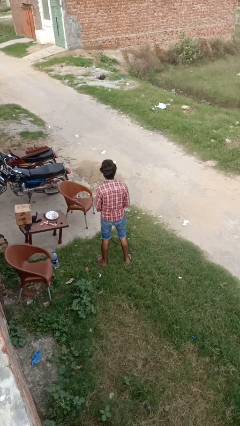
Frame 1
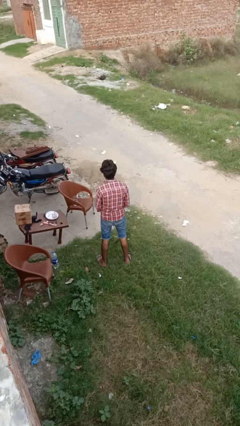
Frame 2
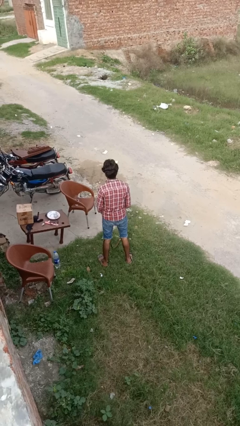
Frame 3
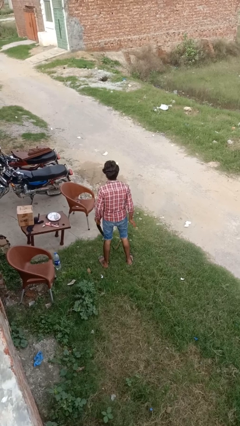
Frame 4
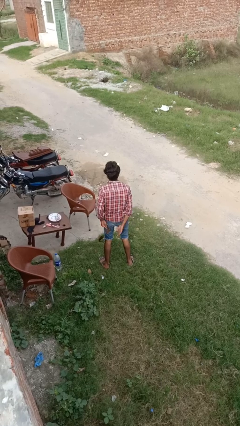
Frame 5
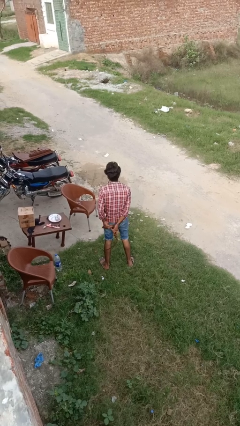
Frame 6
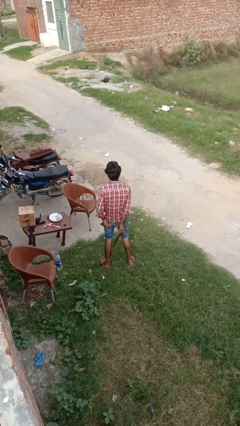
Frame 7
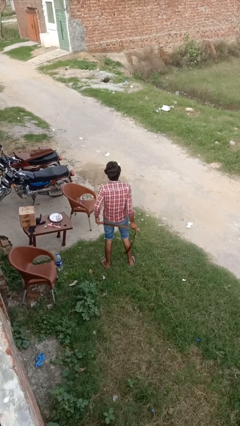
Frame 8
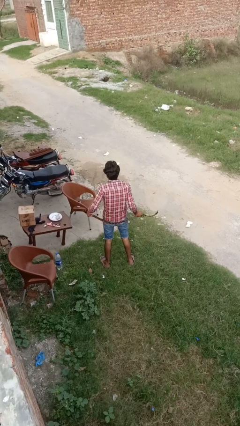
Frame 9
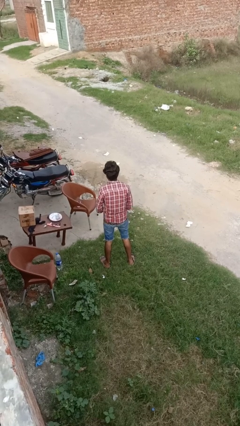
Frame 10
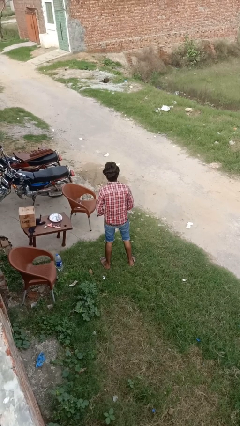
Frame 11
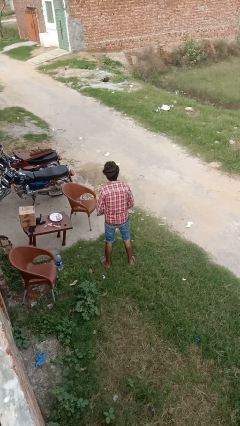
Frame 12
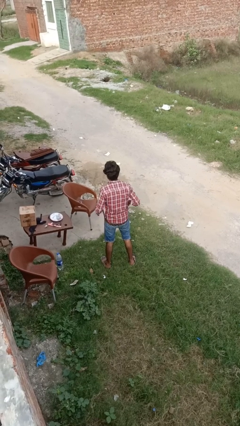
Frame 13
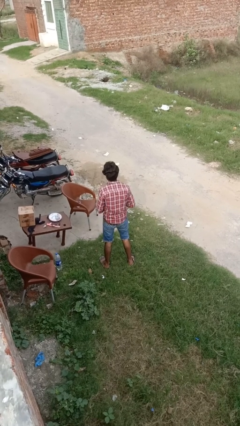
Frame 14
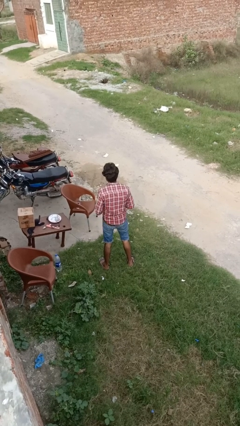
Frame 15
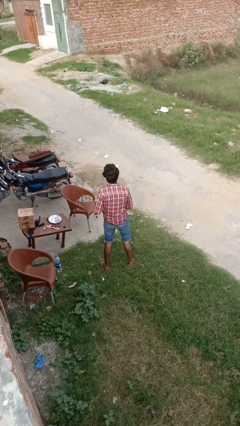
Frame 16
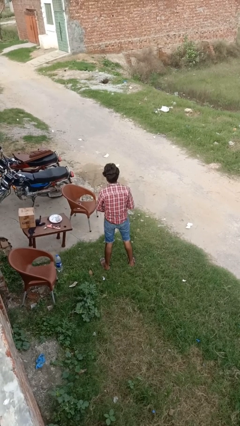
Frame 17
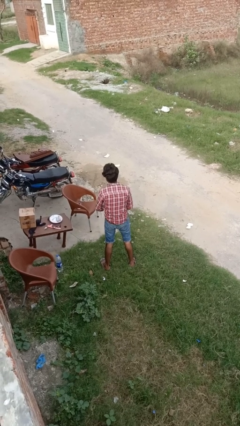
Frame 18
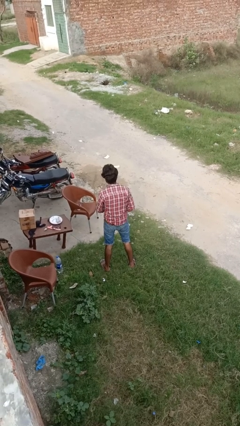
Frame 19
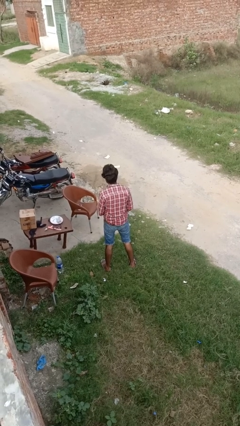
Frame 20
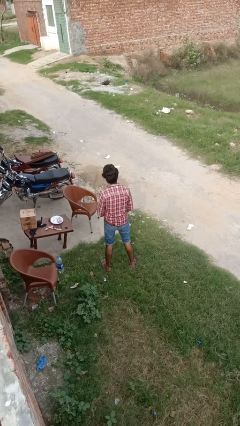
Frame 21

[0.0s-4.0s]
person puts on belt

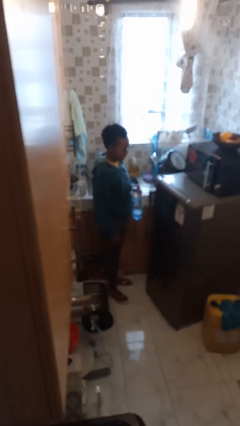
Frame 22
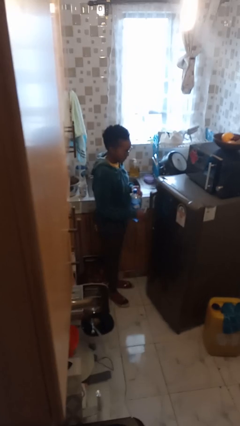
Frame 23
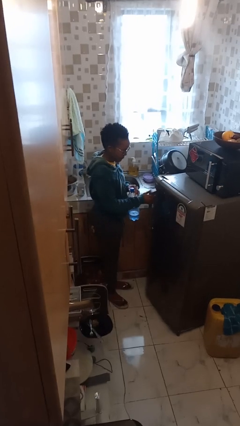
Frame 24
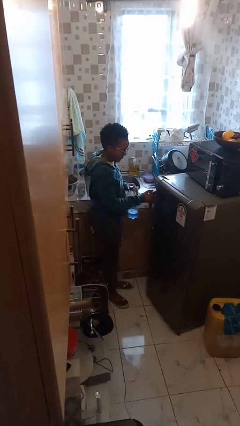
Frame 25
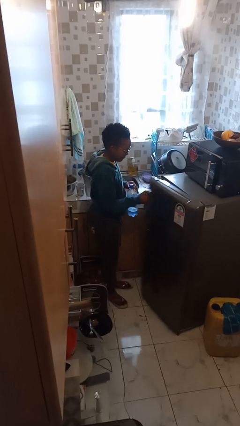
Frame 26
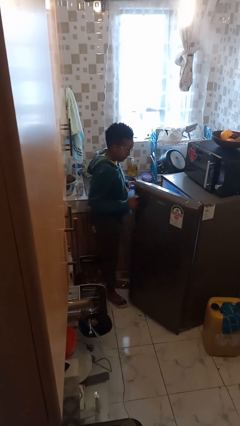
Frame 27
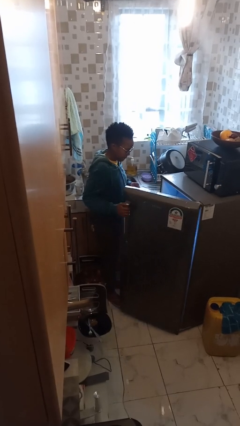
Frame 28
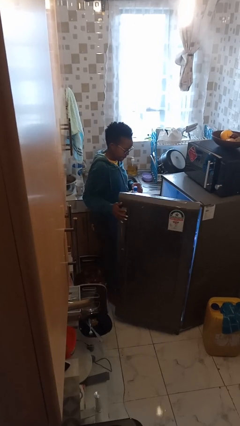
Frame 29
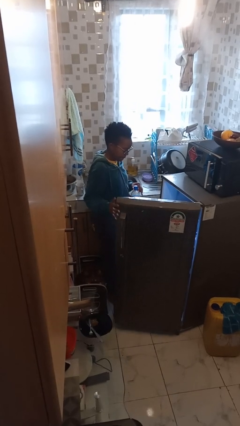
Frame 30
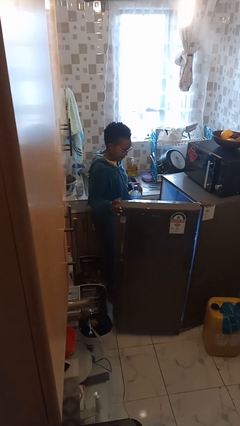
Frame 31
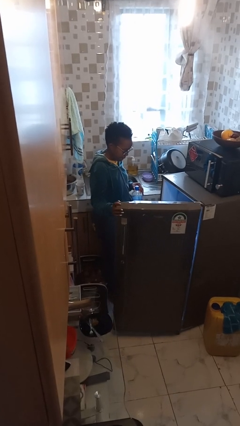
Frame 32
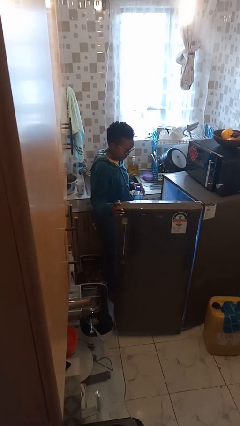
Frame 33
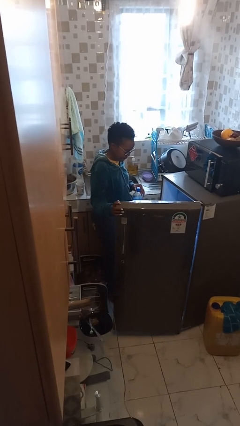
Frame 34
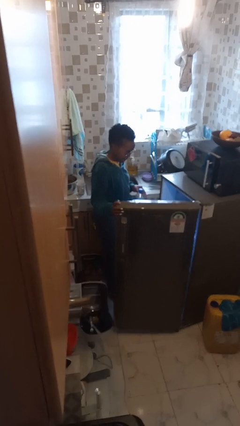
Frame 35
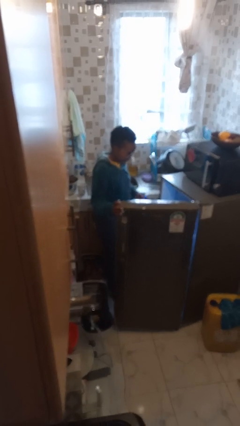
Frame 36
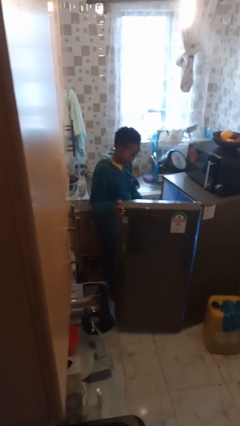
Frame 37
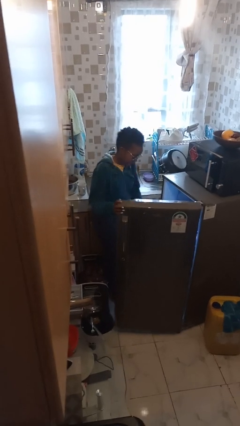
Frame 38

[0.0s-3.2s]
person opens refrigerator

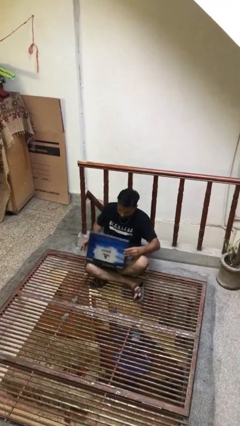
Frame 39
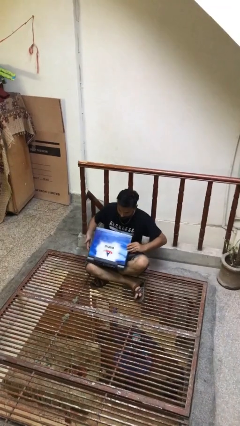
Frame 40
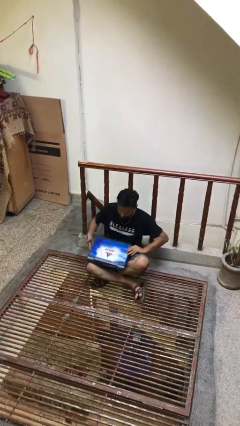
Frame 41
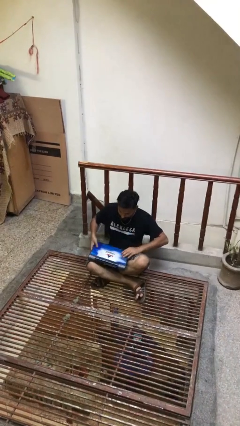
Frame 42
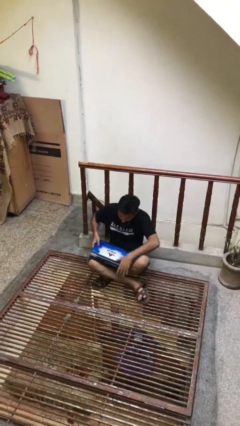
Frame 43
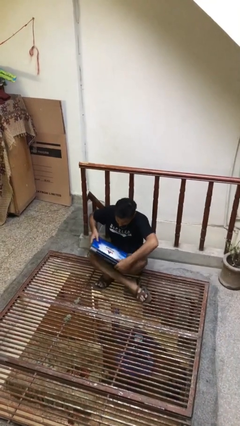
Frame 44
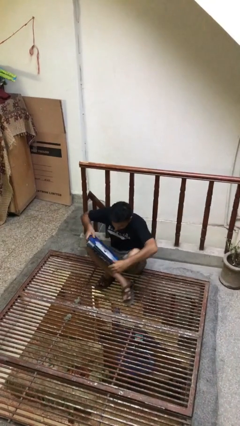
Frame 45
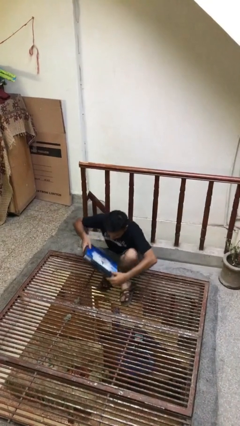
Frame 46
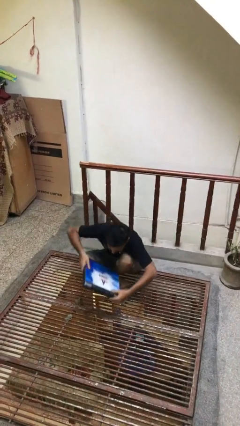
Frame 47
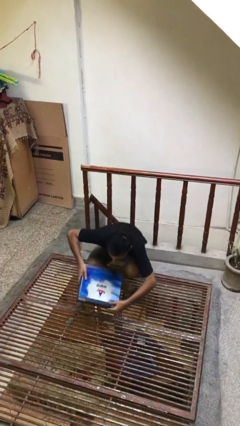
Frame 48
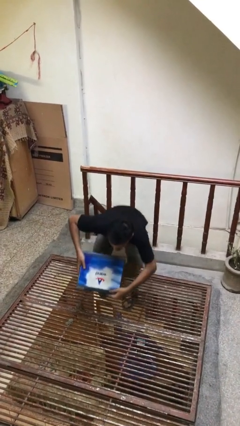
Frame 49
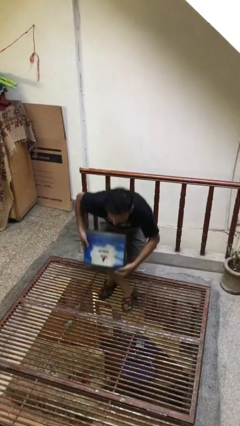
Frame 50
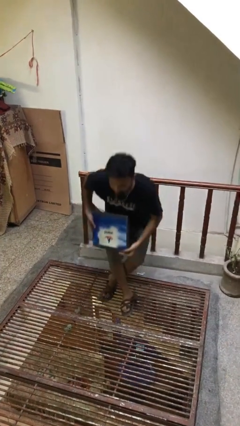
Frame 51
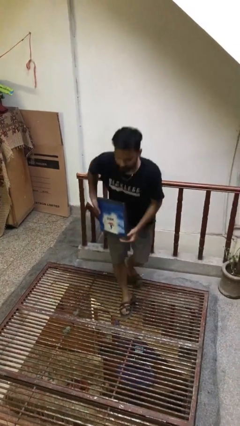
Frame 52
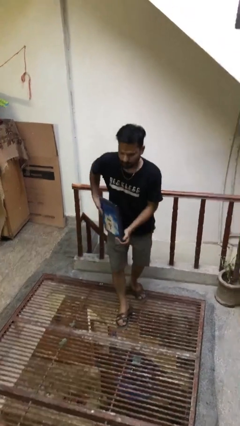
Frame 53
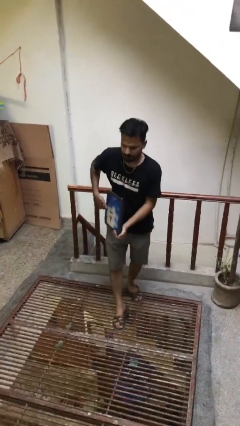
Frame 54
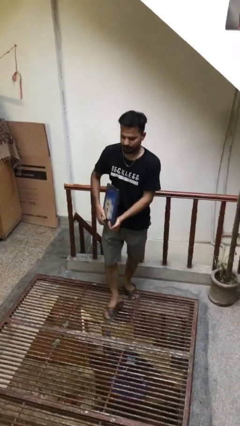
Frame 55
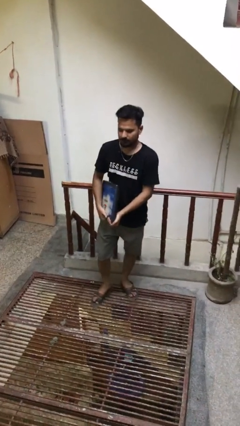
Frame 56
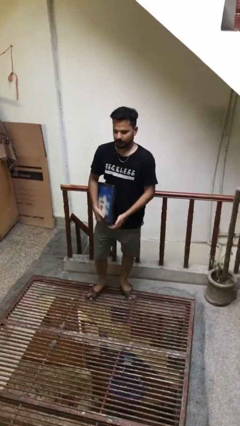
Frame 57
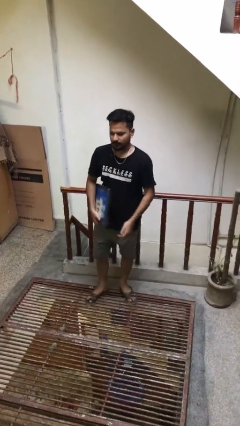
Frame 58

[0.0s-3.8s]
person stands up

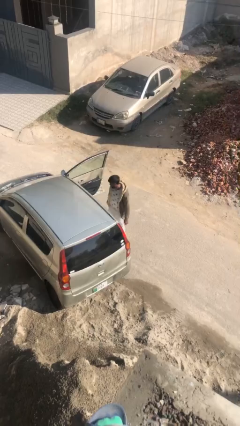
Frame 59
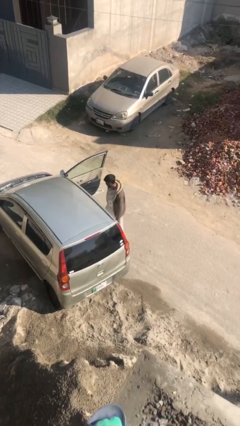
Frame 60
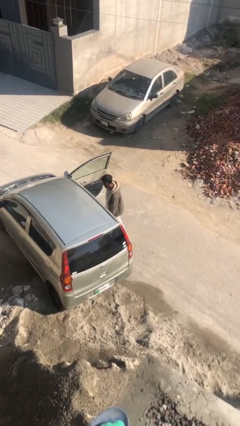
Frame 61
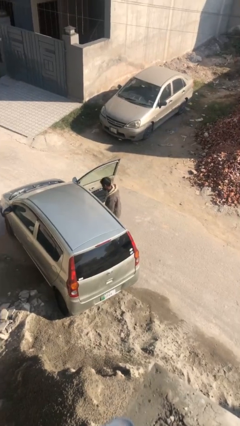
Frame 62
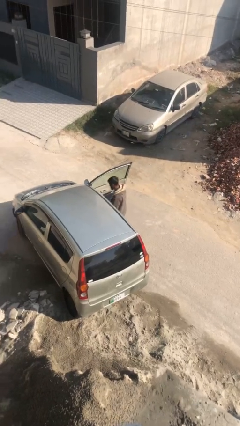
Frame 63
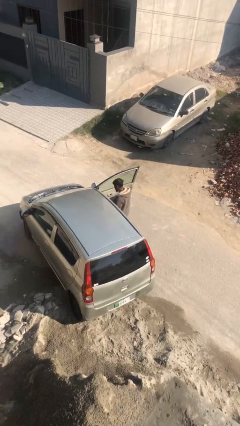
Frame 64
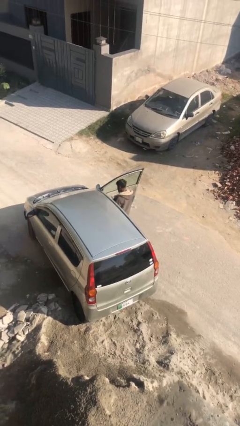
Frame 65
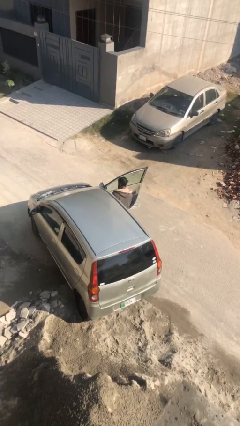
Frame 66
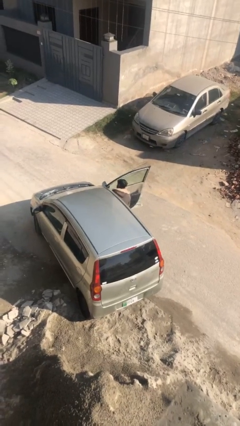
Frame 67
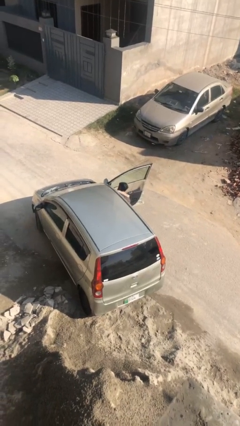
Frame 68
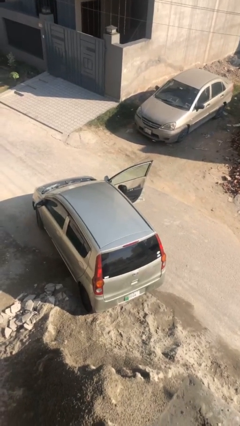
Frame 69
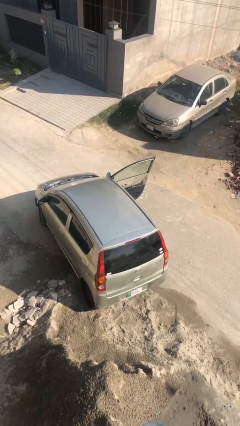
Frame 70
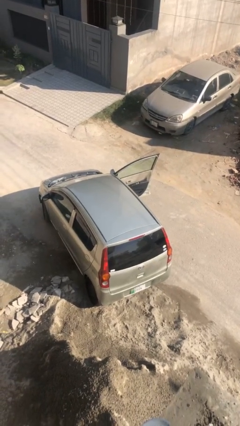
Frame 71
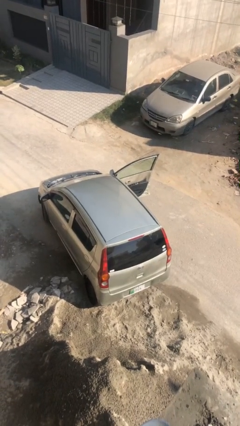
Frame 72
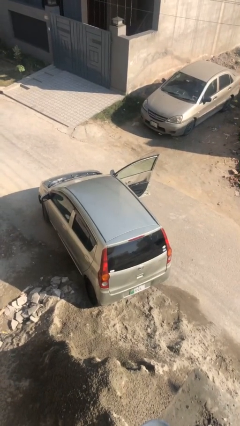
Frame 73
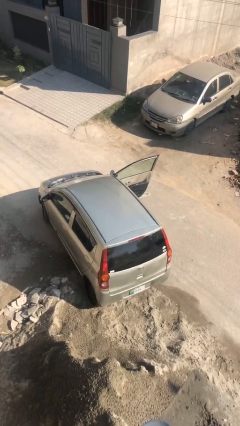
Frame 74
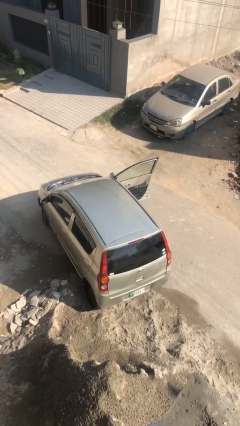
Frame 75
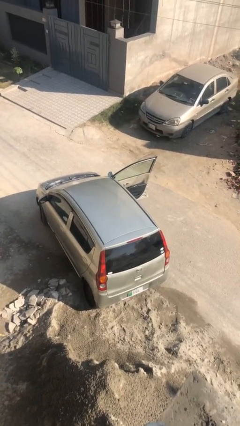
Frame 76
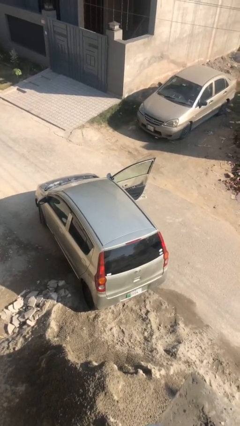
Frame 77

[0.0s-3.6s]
person enters car

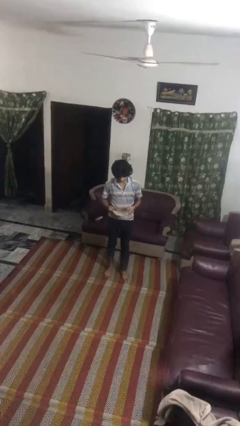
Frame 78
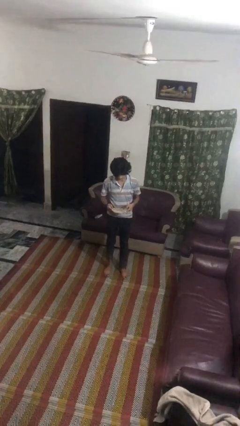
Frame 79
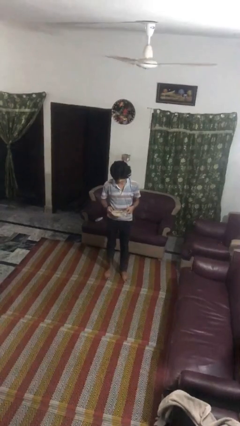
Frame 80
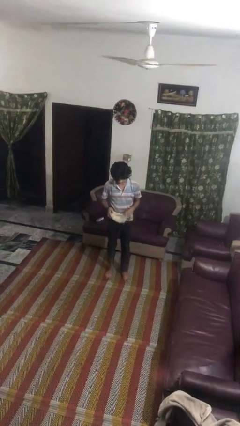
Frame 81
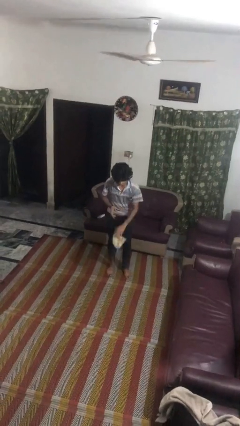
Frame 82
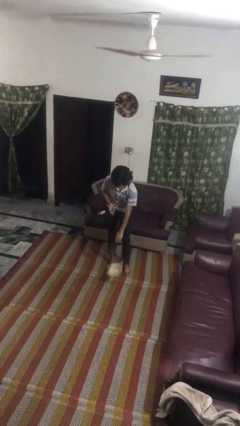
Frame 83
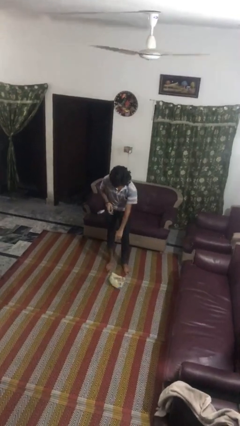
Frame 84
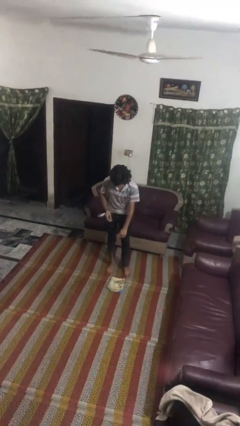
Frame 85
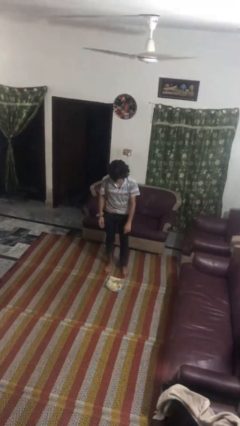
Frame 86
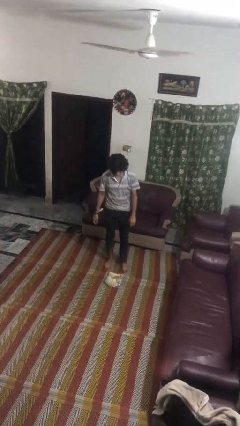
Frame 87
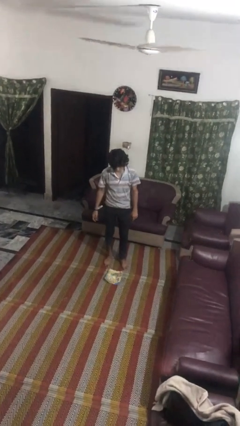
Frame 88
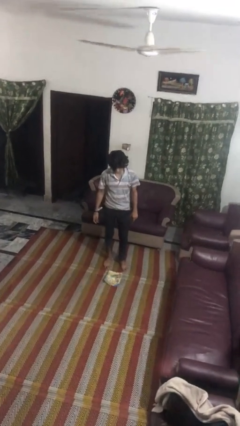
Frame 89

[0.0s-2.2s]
person drops object

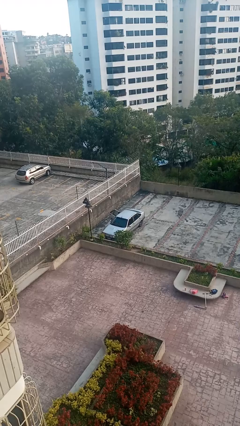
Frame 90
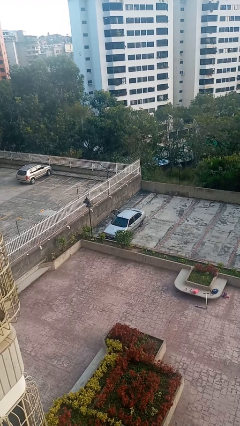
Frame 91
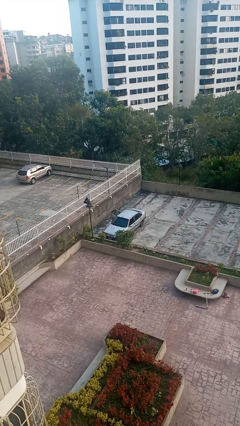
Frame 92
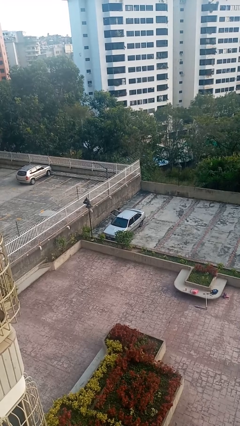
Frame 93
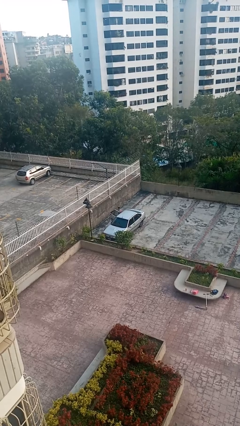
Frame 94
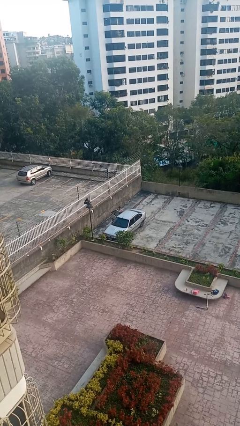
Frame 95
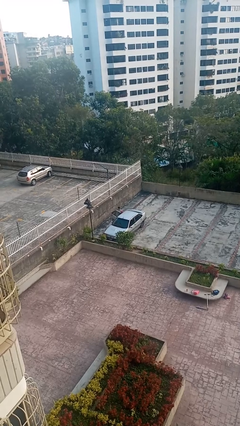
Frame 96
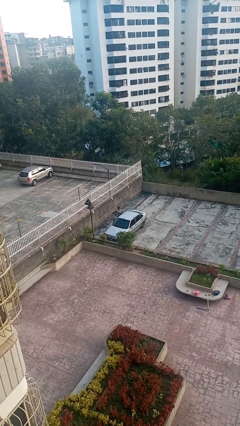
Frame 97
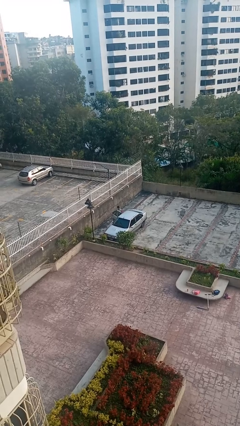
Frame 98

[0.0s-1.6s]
person exits car
